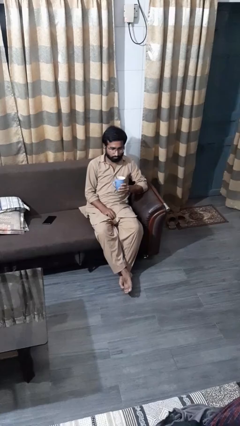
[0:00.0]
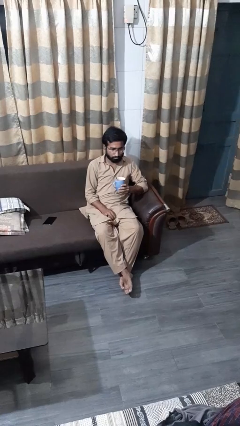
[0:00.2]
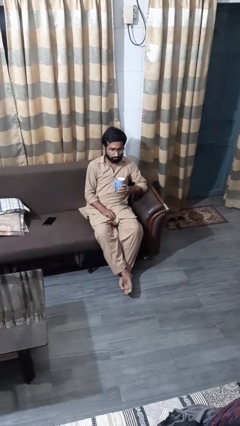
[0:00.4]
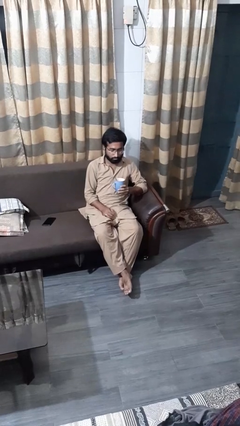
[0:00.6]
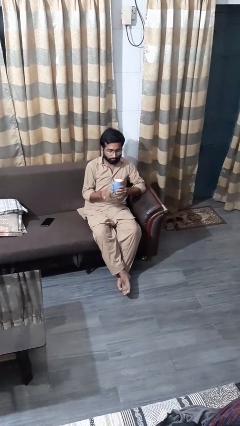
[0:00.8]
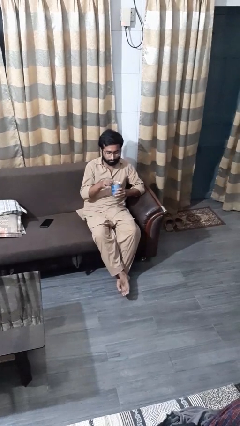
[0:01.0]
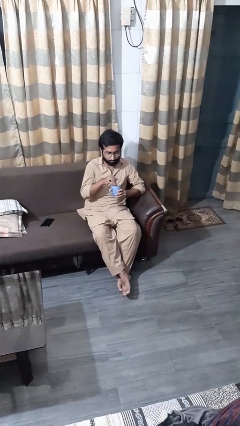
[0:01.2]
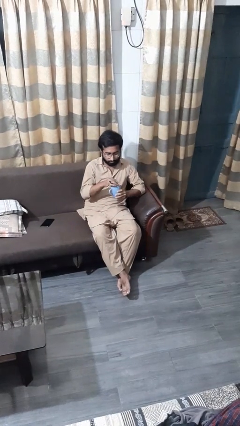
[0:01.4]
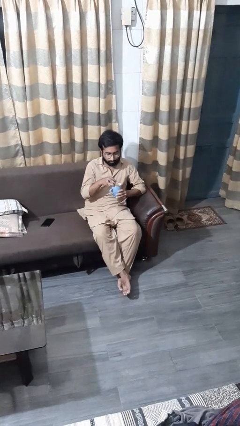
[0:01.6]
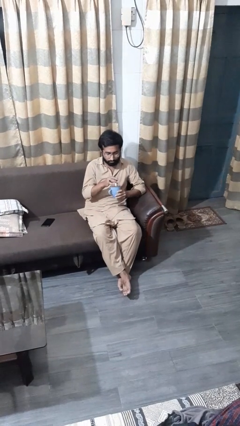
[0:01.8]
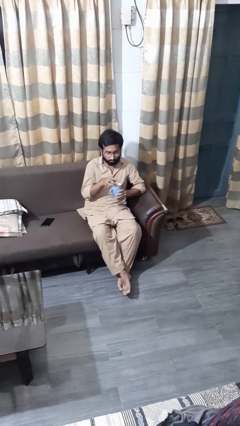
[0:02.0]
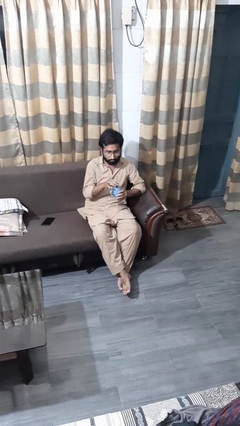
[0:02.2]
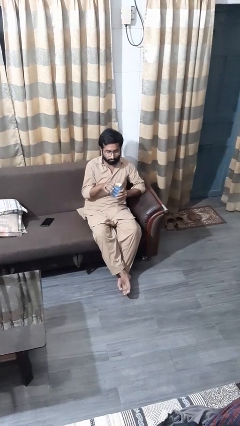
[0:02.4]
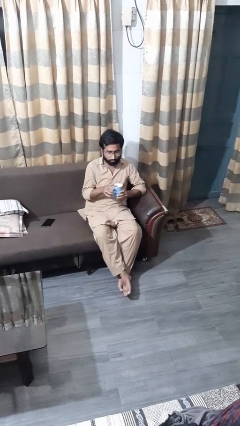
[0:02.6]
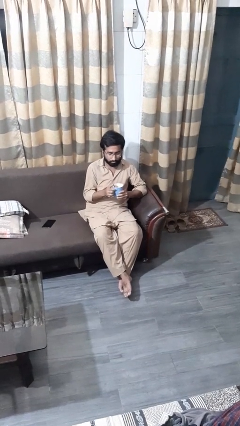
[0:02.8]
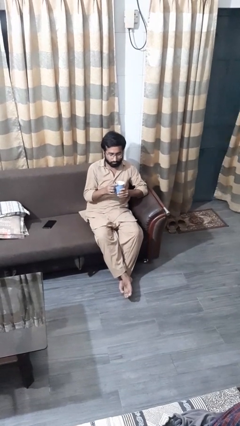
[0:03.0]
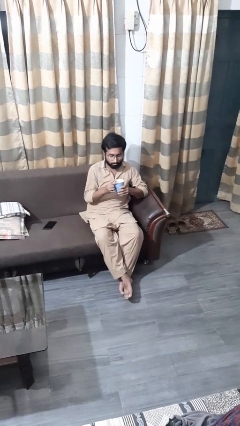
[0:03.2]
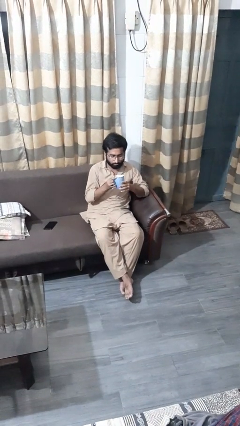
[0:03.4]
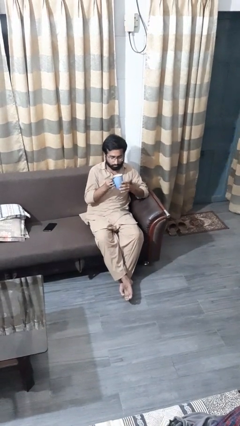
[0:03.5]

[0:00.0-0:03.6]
person stirs mug

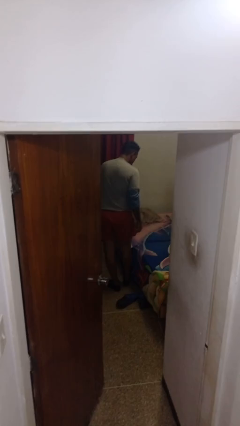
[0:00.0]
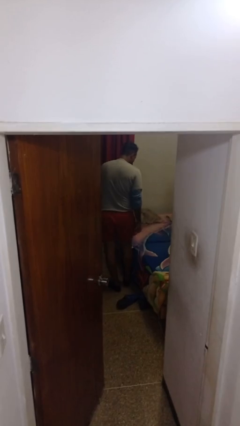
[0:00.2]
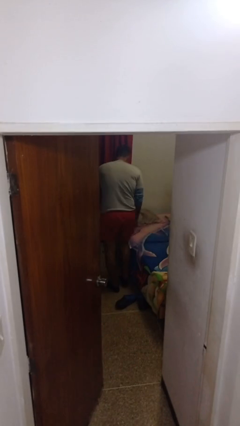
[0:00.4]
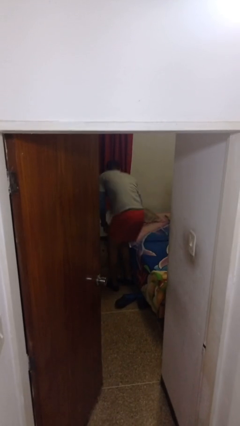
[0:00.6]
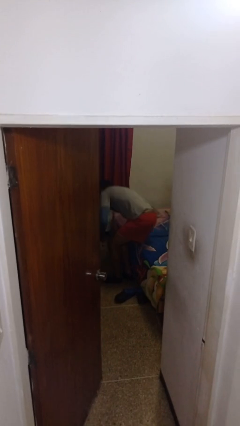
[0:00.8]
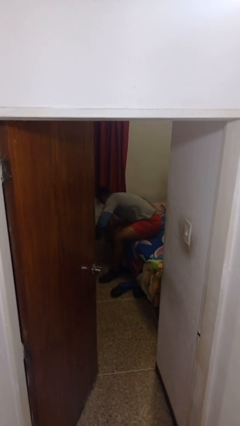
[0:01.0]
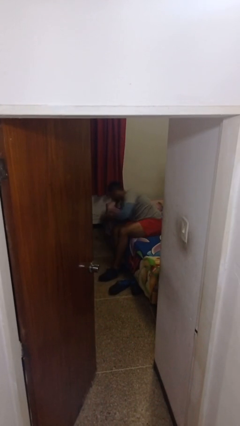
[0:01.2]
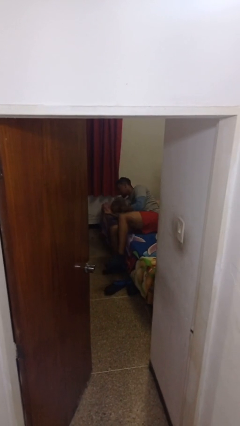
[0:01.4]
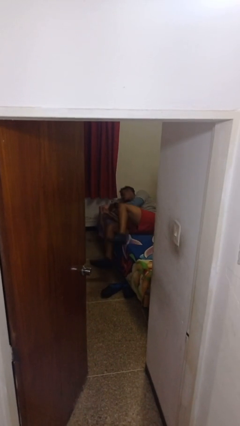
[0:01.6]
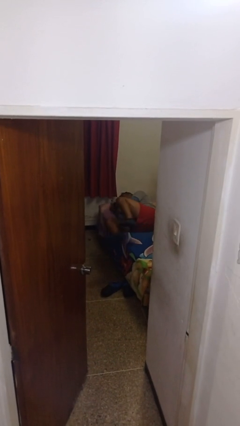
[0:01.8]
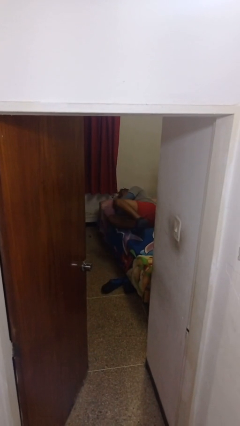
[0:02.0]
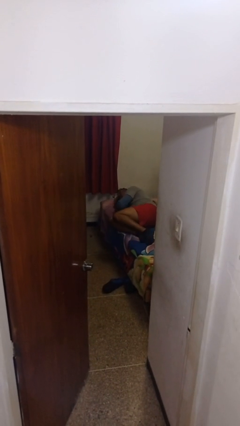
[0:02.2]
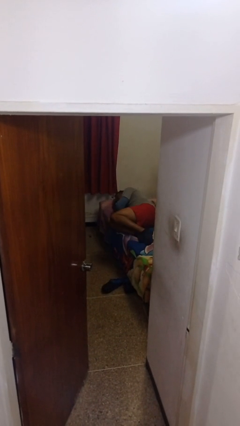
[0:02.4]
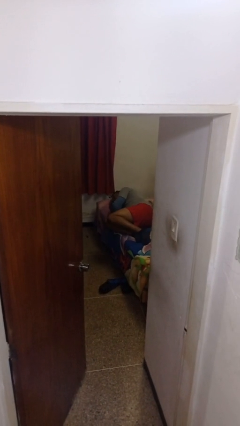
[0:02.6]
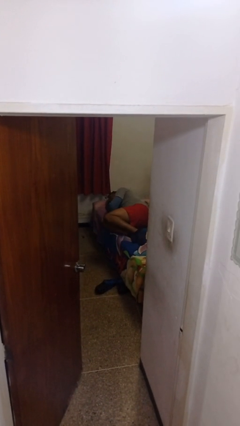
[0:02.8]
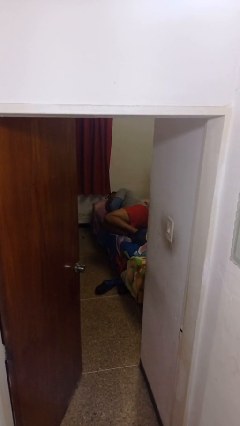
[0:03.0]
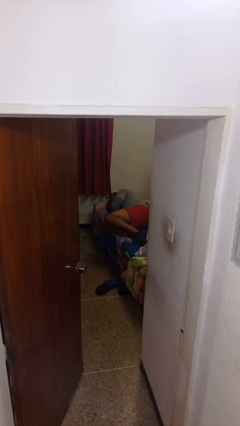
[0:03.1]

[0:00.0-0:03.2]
person lies down on bed

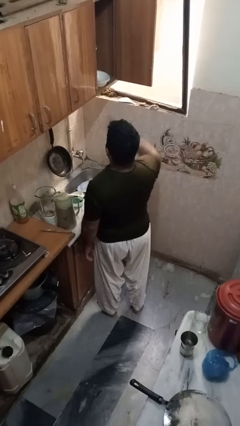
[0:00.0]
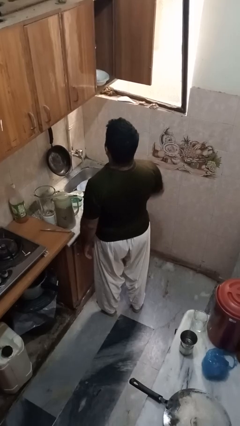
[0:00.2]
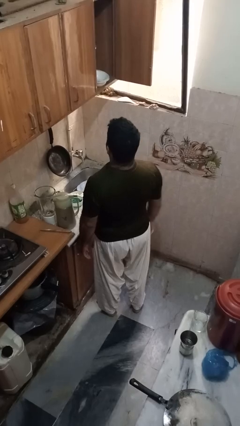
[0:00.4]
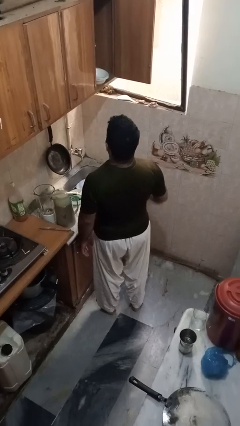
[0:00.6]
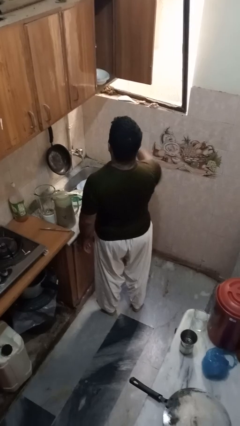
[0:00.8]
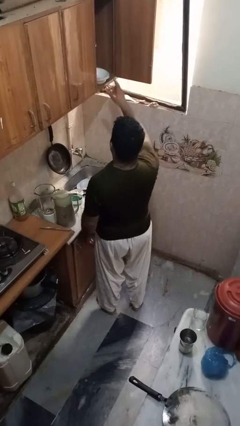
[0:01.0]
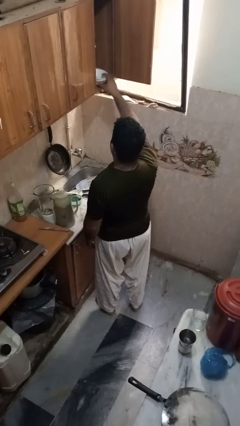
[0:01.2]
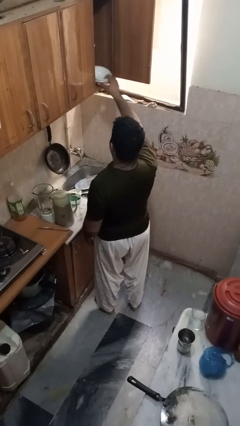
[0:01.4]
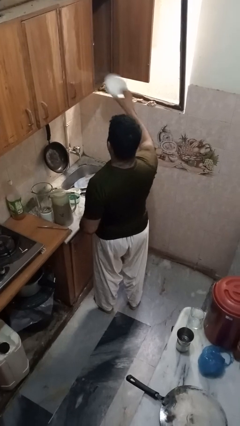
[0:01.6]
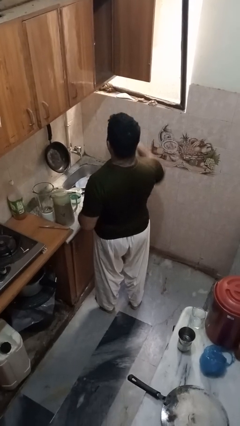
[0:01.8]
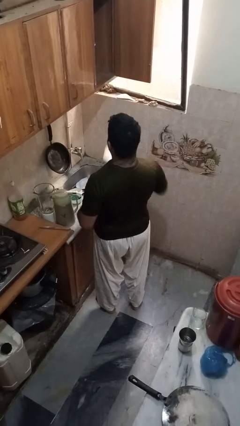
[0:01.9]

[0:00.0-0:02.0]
person takes object from cabinet

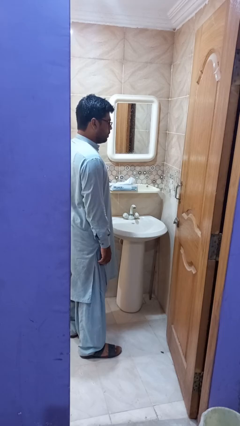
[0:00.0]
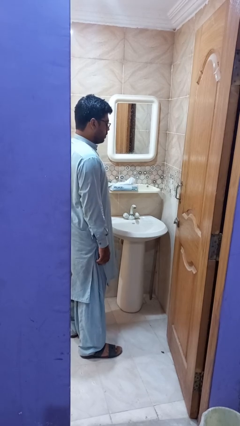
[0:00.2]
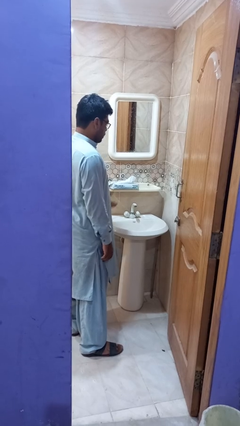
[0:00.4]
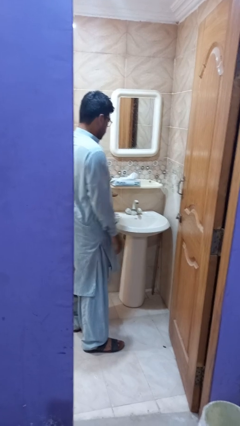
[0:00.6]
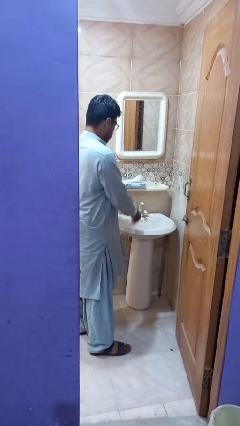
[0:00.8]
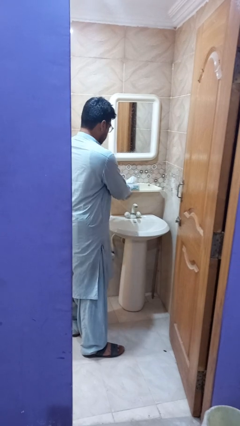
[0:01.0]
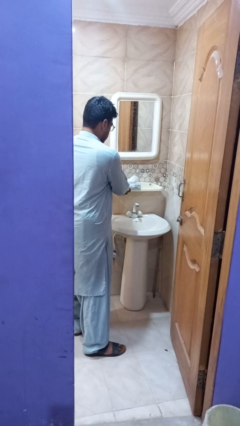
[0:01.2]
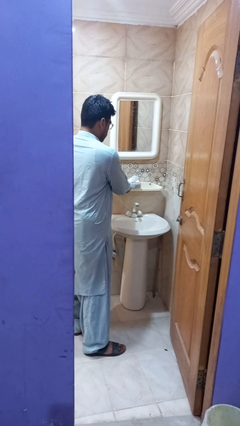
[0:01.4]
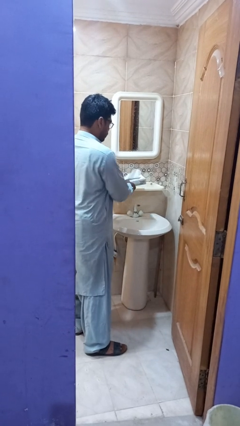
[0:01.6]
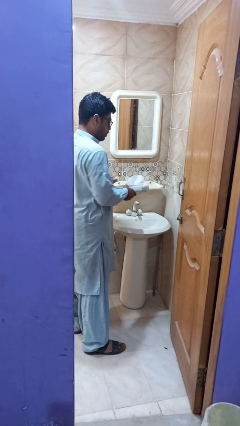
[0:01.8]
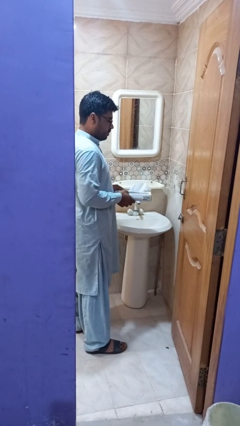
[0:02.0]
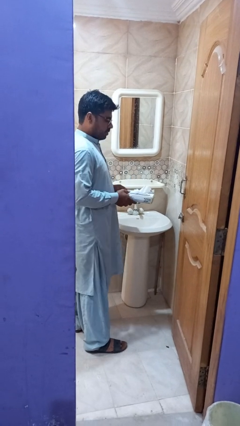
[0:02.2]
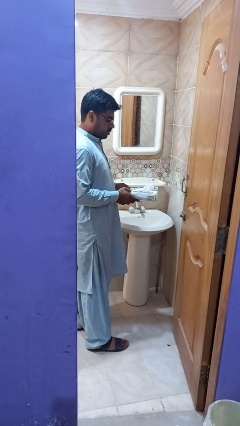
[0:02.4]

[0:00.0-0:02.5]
person picks up object from countertop

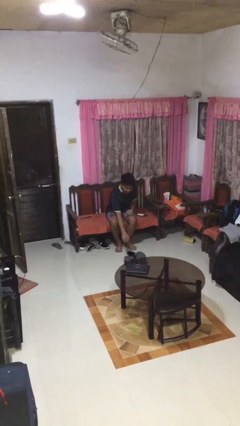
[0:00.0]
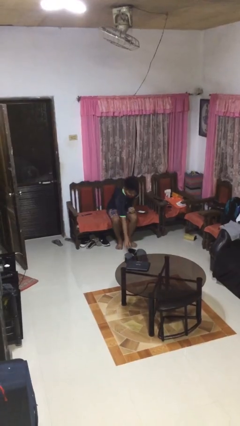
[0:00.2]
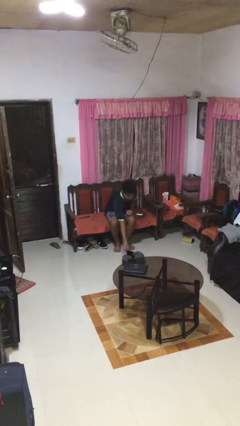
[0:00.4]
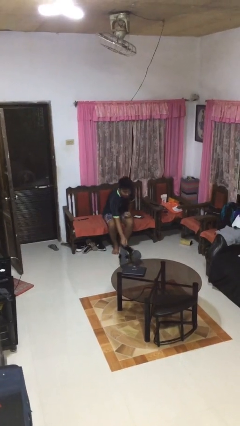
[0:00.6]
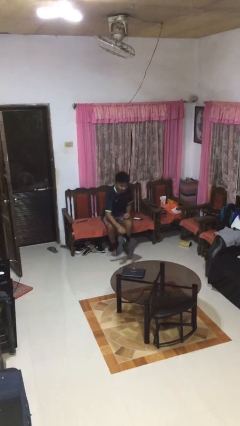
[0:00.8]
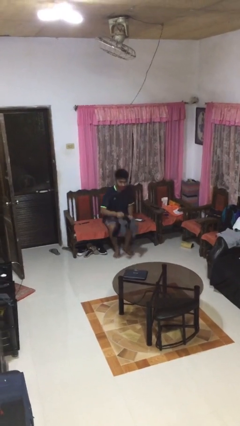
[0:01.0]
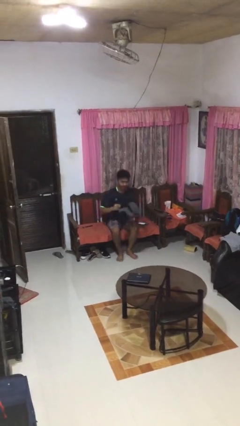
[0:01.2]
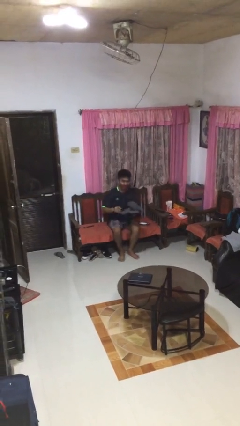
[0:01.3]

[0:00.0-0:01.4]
person picks up object from floor

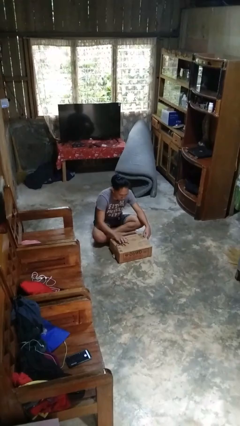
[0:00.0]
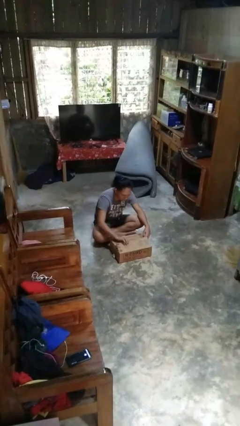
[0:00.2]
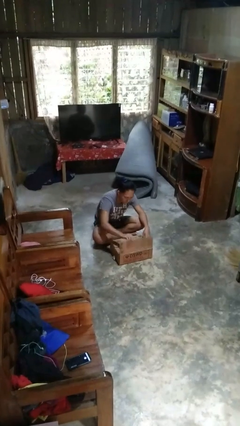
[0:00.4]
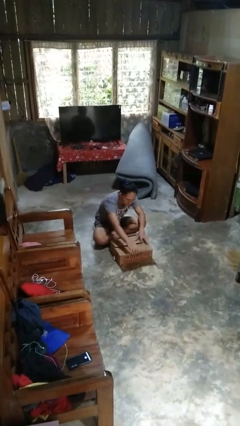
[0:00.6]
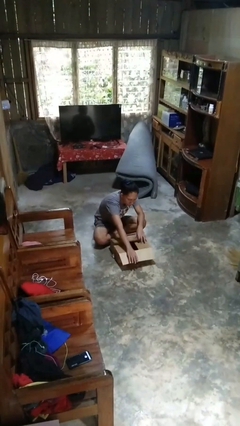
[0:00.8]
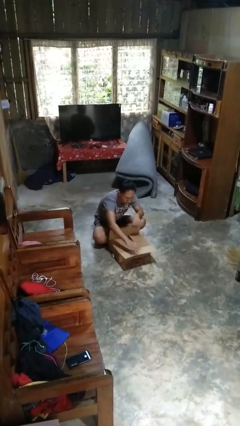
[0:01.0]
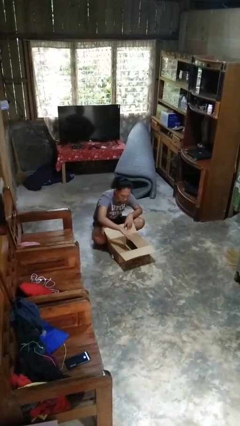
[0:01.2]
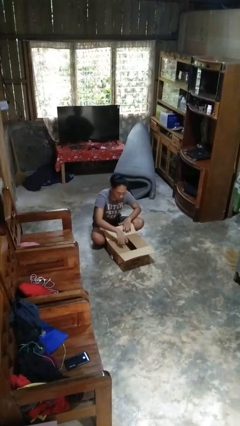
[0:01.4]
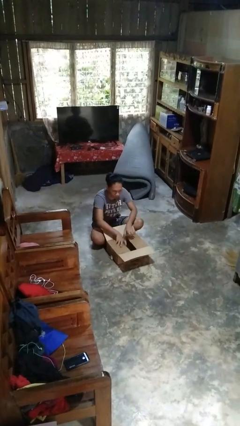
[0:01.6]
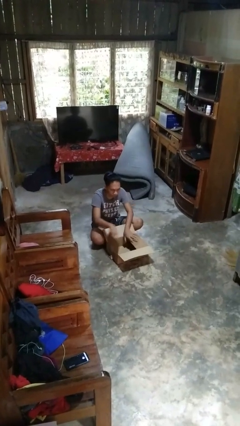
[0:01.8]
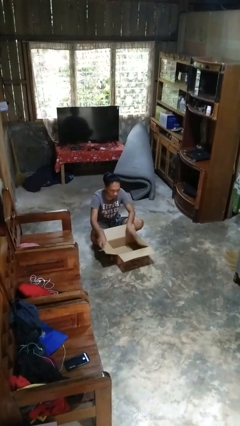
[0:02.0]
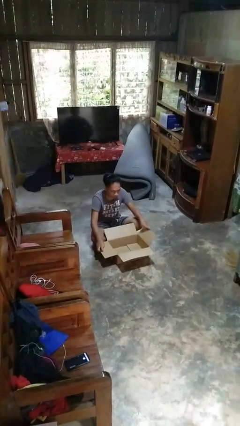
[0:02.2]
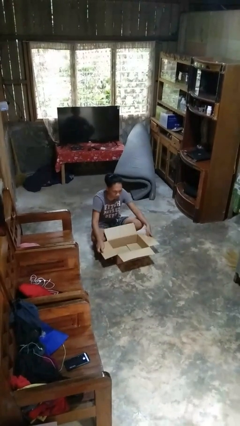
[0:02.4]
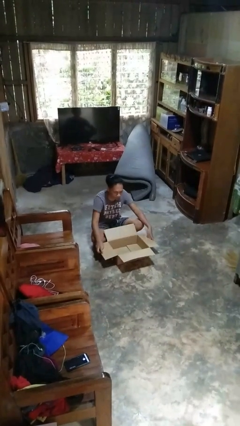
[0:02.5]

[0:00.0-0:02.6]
person opens box

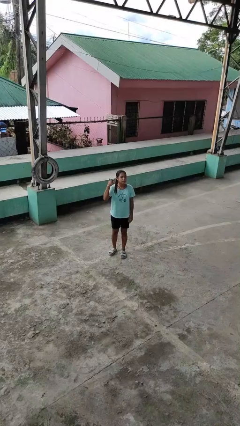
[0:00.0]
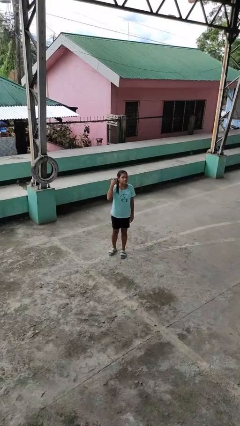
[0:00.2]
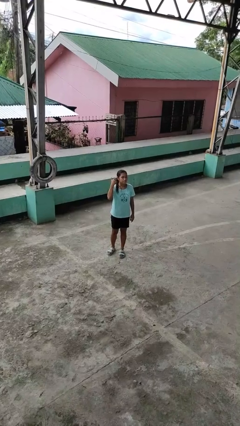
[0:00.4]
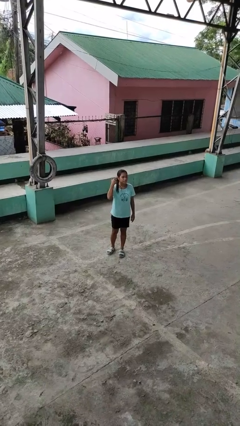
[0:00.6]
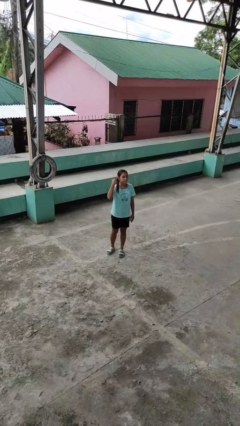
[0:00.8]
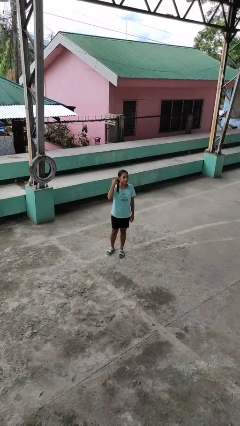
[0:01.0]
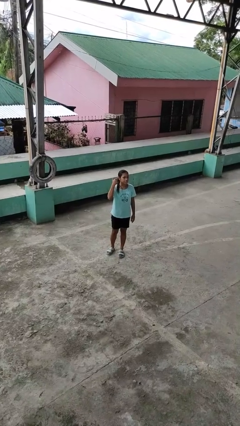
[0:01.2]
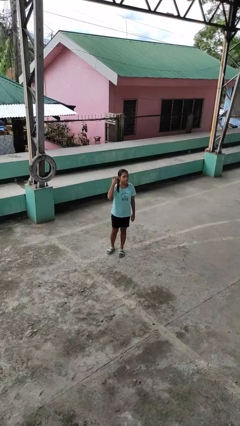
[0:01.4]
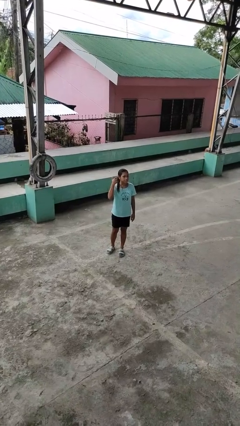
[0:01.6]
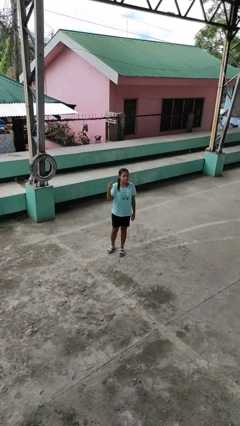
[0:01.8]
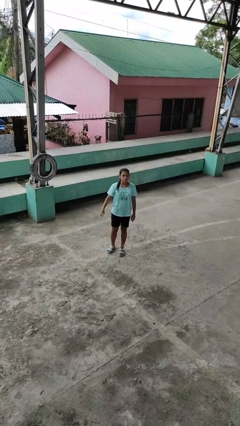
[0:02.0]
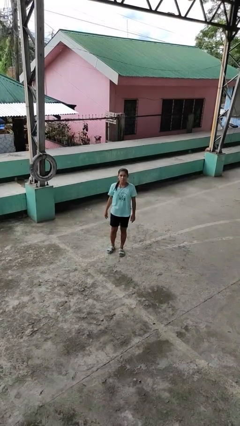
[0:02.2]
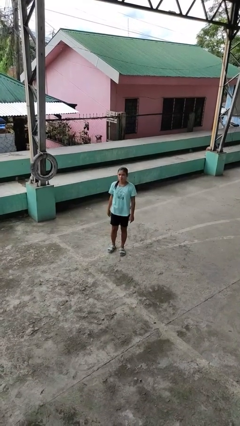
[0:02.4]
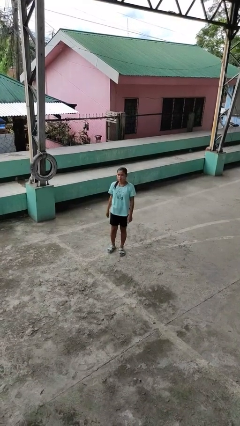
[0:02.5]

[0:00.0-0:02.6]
person gestures listen closely
